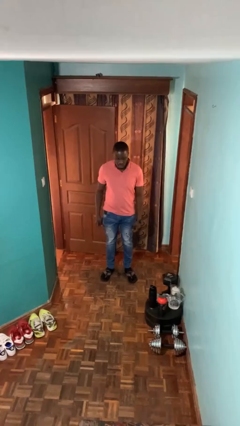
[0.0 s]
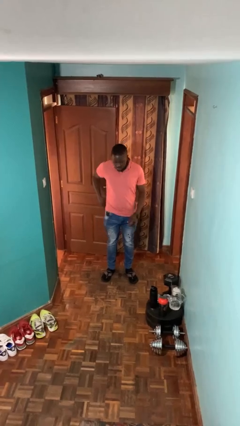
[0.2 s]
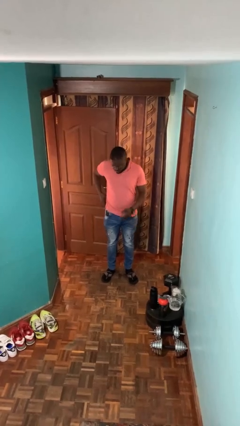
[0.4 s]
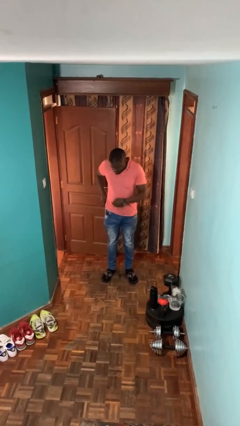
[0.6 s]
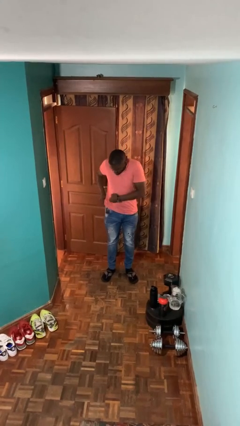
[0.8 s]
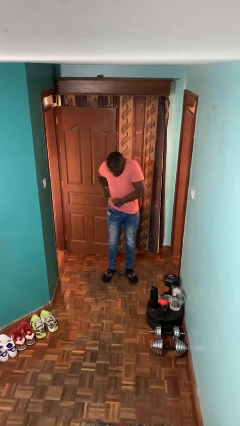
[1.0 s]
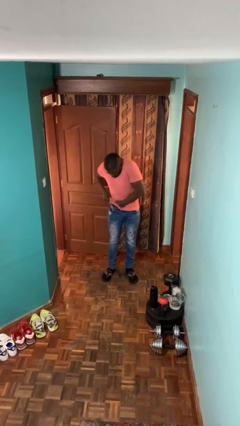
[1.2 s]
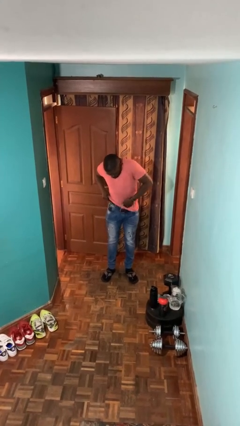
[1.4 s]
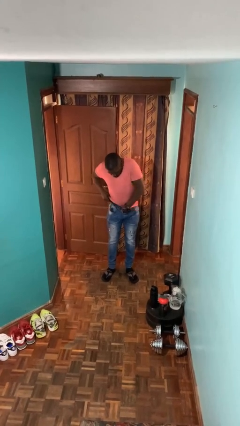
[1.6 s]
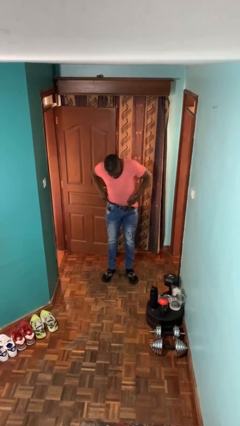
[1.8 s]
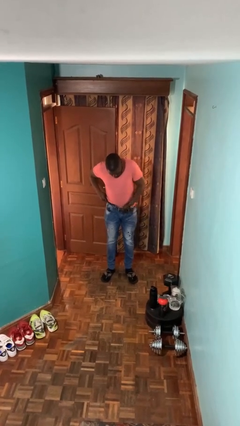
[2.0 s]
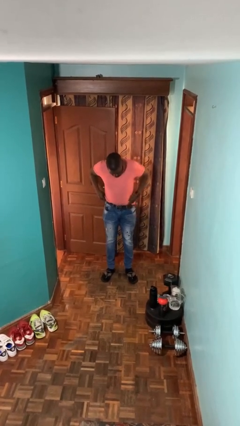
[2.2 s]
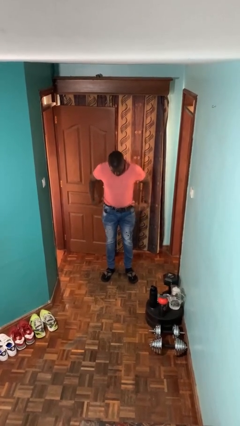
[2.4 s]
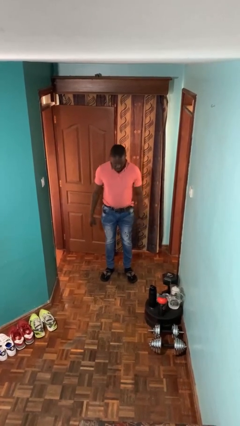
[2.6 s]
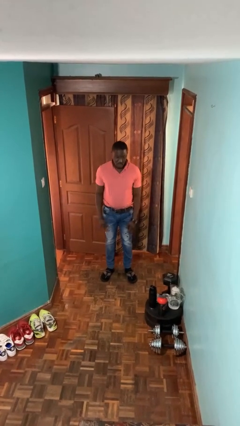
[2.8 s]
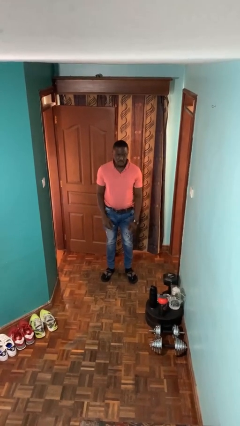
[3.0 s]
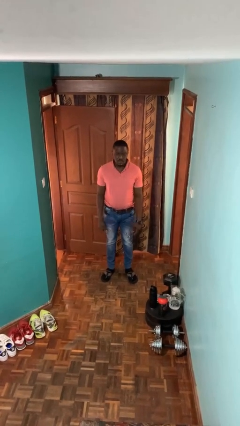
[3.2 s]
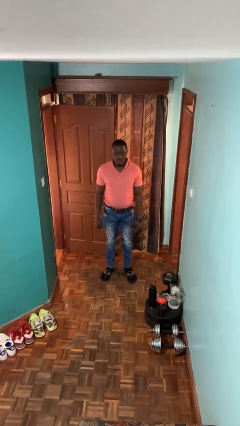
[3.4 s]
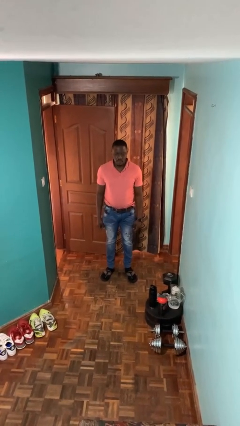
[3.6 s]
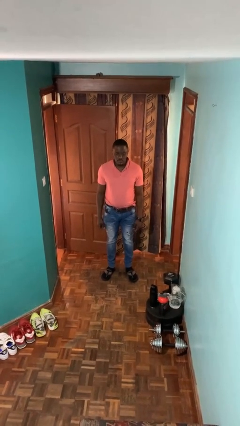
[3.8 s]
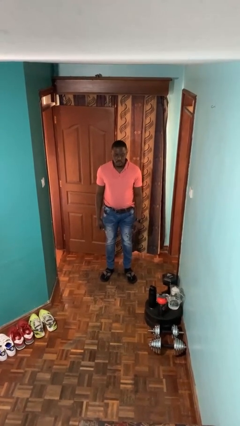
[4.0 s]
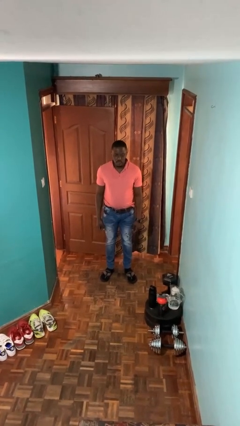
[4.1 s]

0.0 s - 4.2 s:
person tucks in shirt

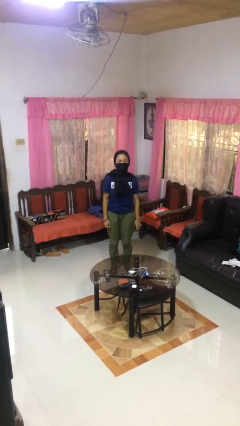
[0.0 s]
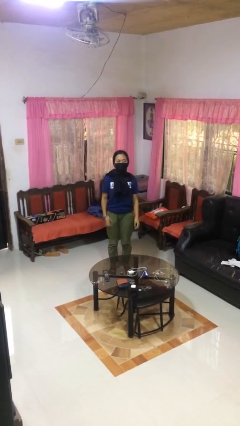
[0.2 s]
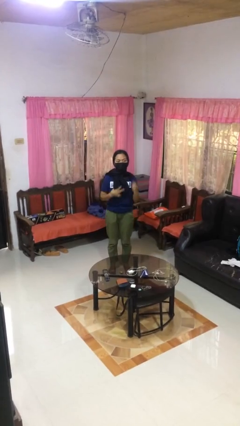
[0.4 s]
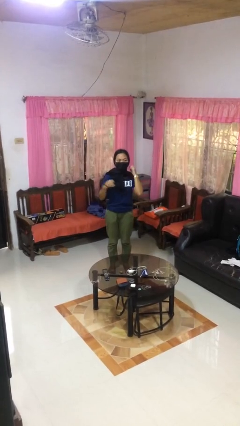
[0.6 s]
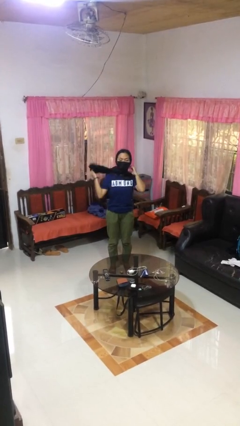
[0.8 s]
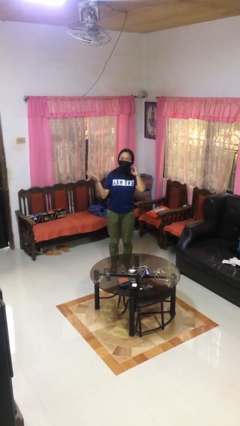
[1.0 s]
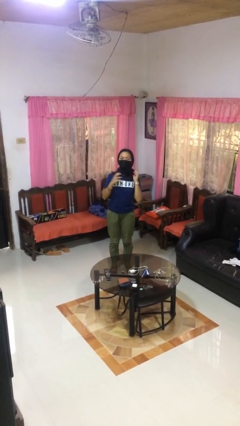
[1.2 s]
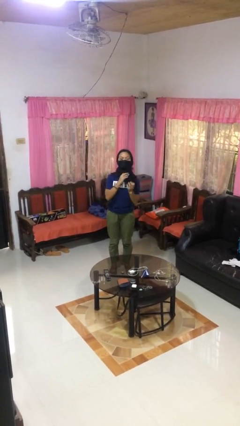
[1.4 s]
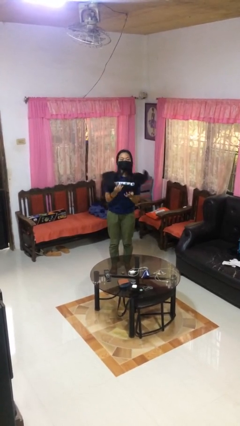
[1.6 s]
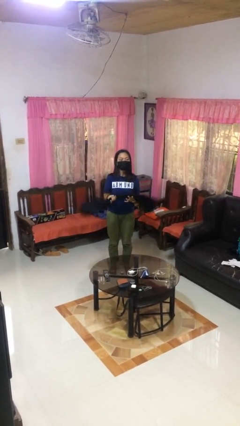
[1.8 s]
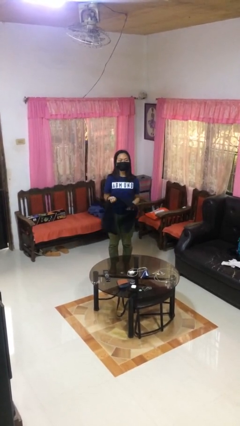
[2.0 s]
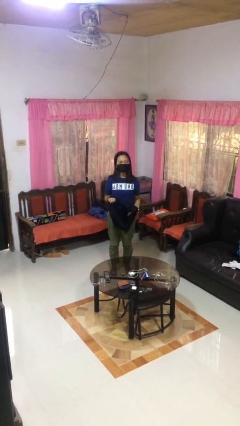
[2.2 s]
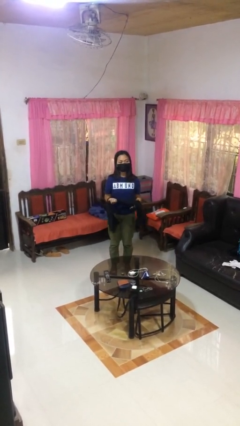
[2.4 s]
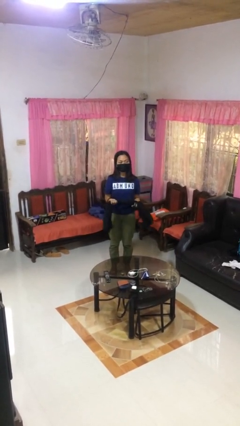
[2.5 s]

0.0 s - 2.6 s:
person takes off scarf

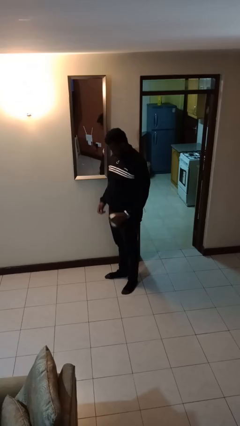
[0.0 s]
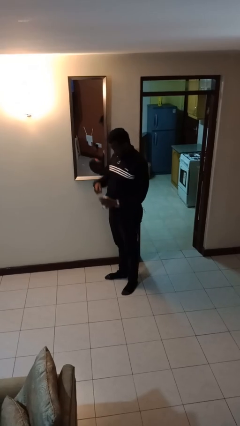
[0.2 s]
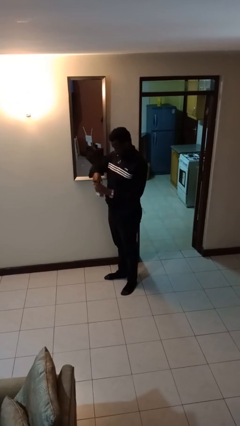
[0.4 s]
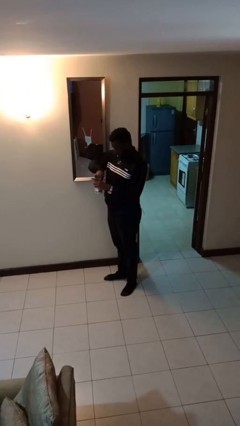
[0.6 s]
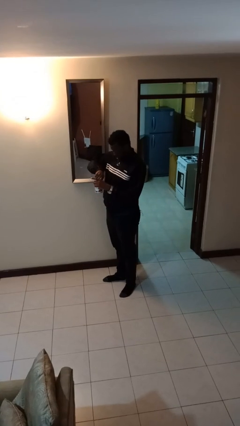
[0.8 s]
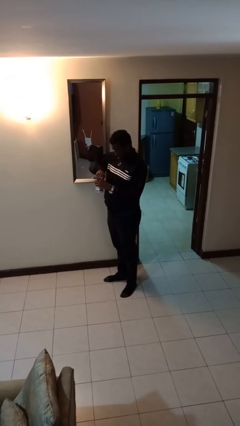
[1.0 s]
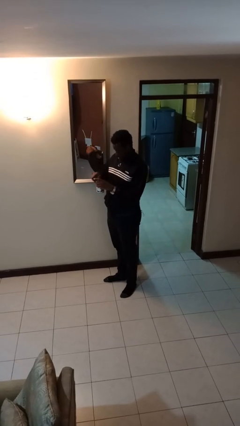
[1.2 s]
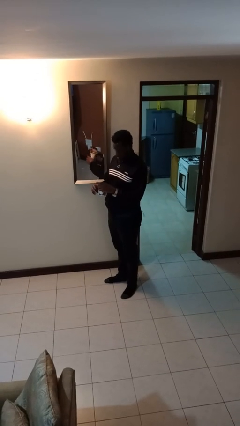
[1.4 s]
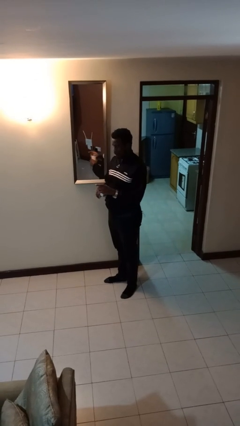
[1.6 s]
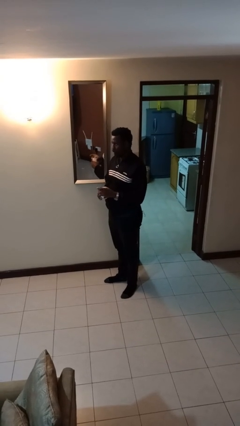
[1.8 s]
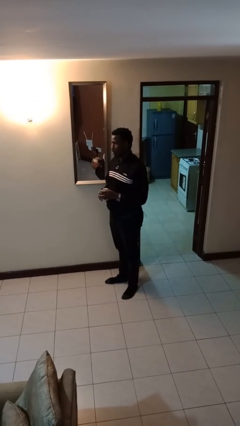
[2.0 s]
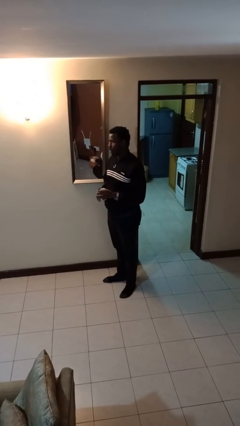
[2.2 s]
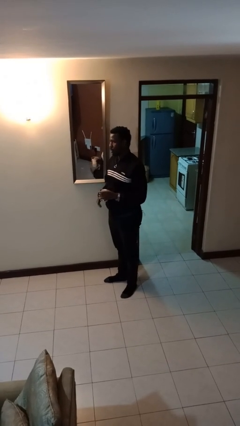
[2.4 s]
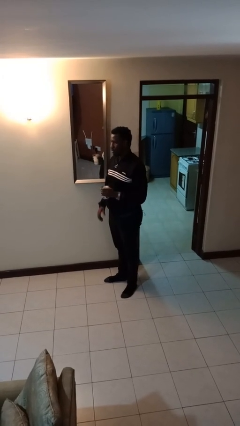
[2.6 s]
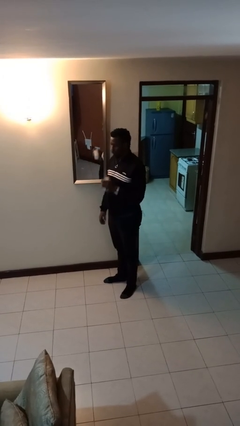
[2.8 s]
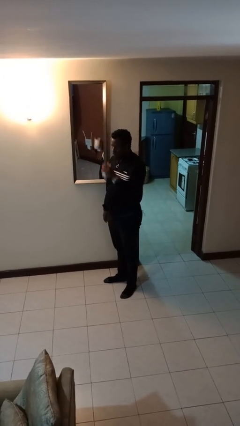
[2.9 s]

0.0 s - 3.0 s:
person opens beverage can

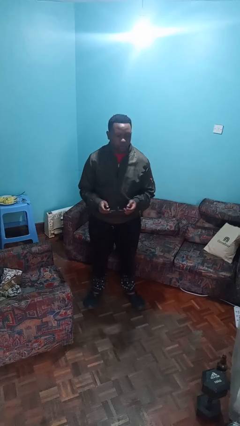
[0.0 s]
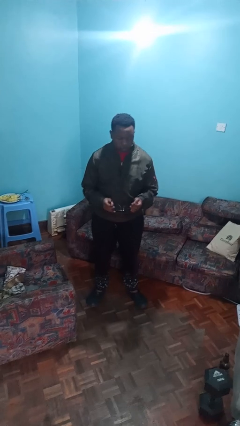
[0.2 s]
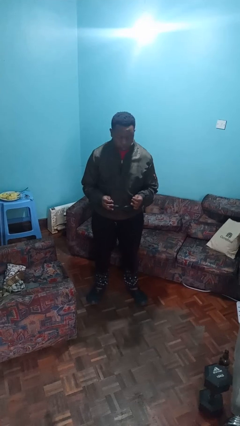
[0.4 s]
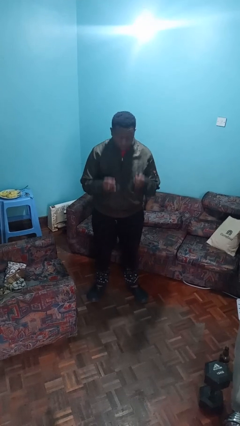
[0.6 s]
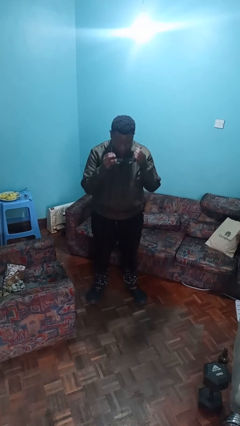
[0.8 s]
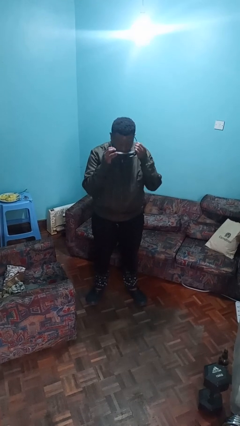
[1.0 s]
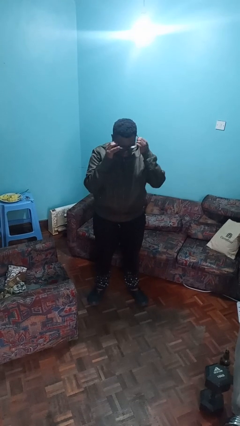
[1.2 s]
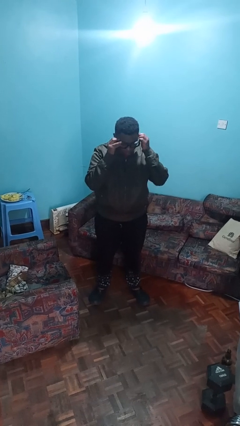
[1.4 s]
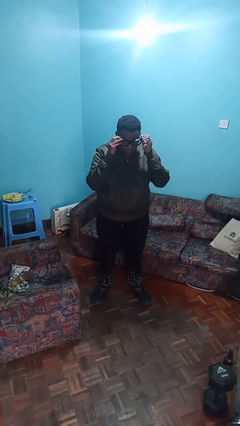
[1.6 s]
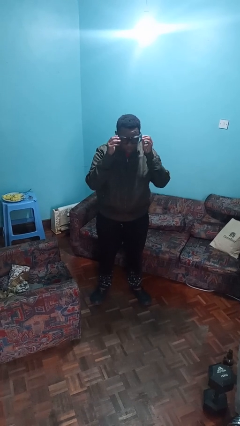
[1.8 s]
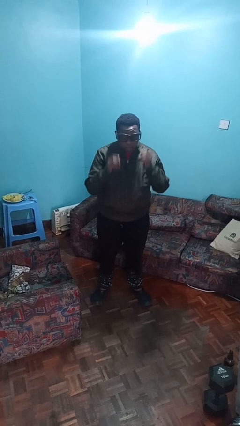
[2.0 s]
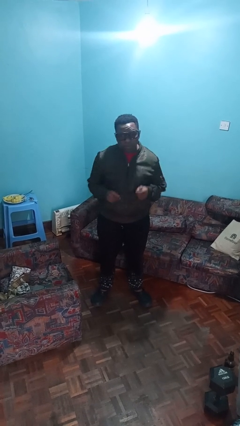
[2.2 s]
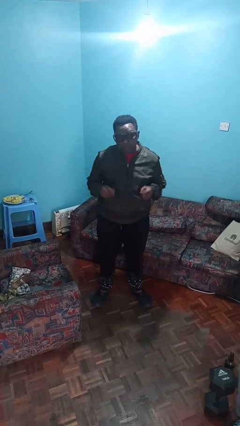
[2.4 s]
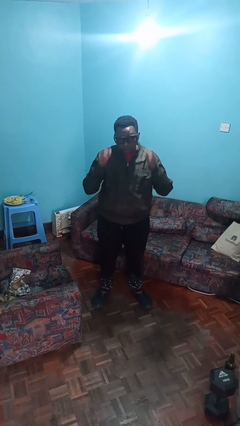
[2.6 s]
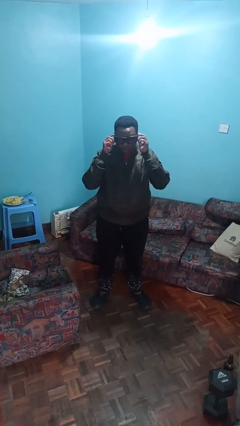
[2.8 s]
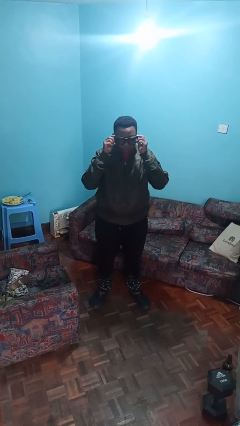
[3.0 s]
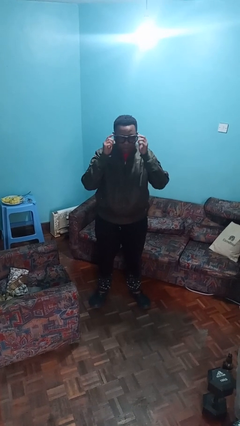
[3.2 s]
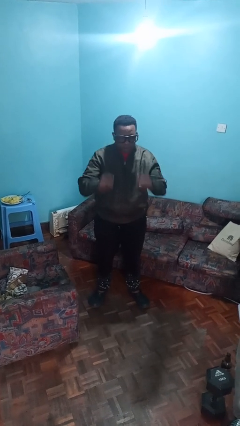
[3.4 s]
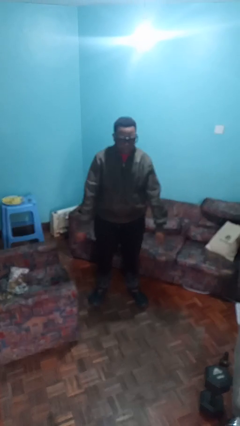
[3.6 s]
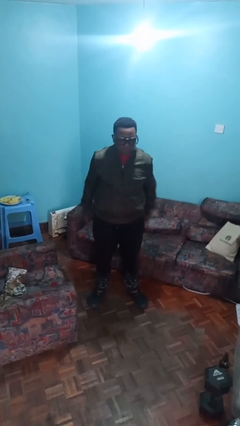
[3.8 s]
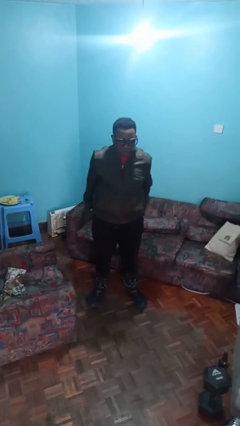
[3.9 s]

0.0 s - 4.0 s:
person puts on glasses

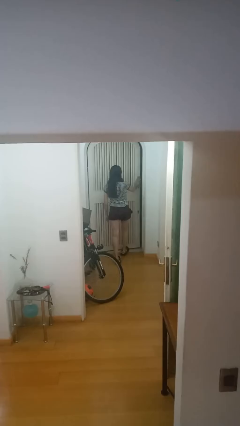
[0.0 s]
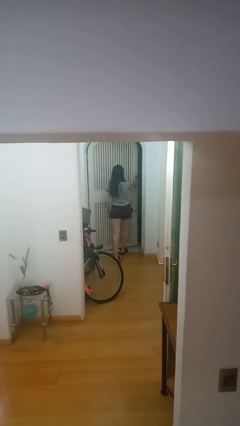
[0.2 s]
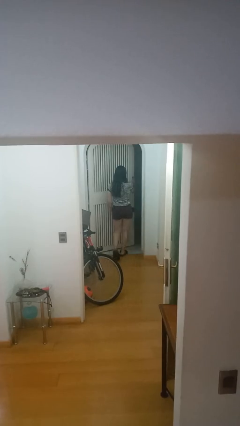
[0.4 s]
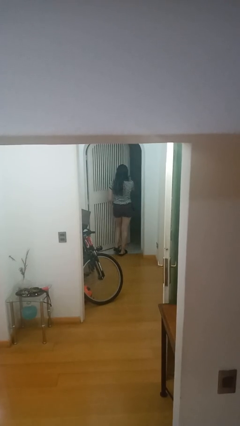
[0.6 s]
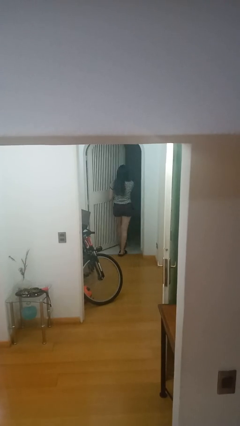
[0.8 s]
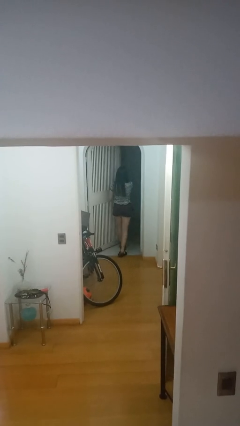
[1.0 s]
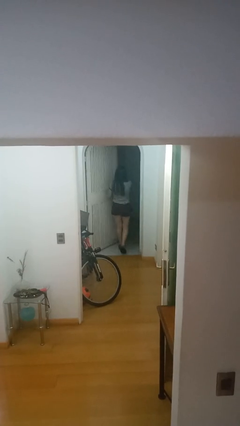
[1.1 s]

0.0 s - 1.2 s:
person opens facility door

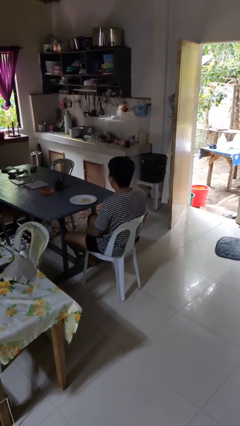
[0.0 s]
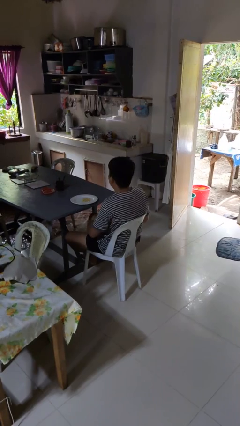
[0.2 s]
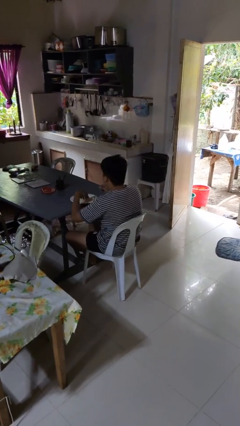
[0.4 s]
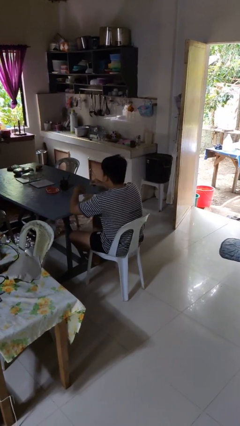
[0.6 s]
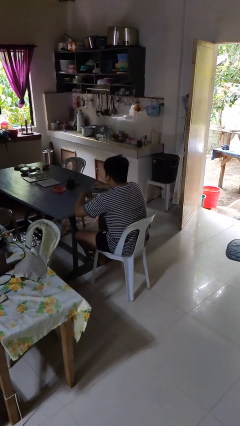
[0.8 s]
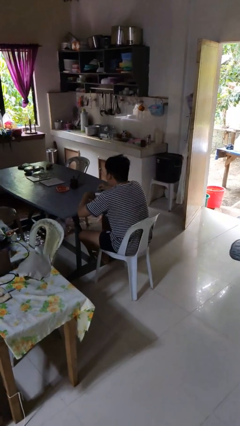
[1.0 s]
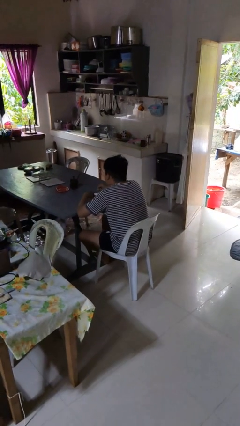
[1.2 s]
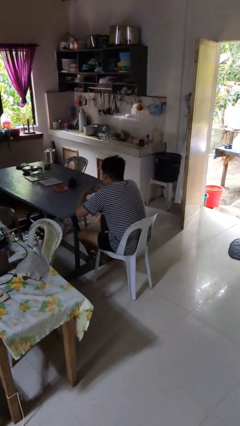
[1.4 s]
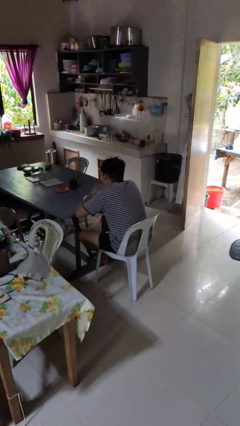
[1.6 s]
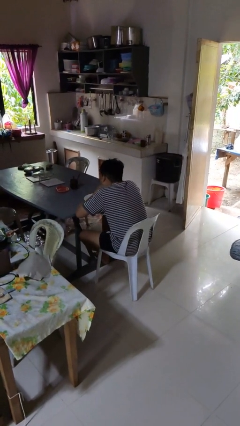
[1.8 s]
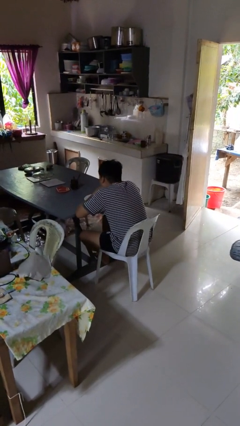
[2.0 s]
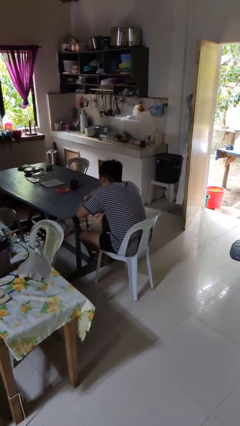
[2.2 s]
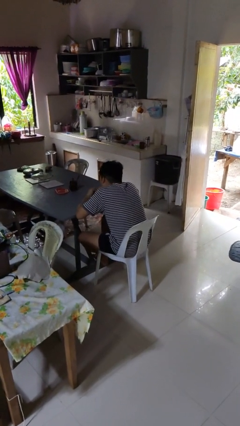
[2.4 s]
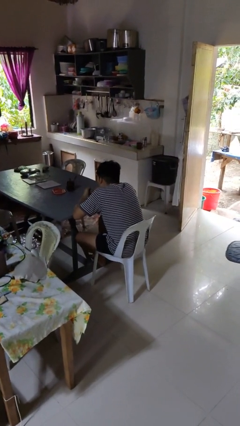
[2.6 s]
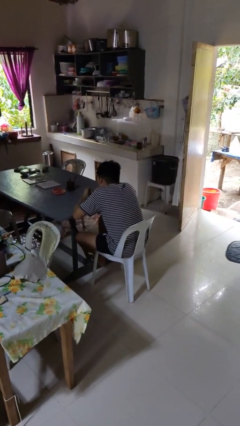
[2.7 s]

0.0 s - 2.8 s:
person eats with hands

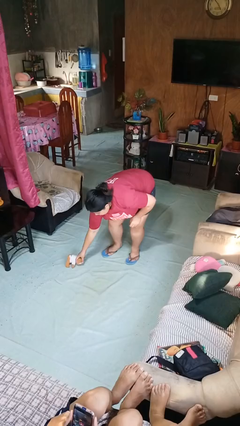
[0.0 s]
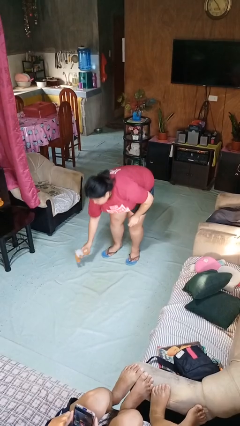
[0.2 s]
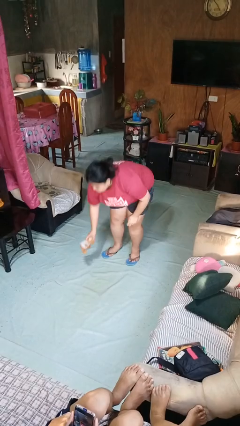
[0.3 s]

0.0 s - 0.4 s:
person picks up object from floor
